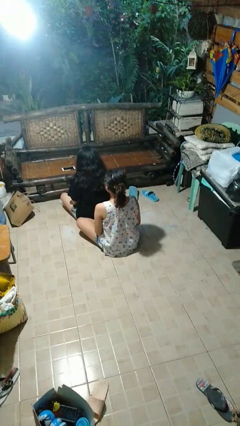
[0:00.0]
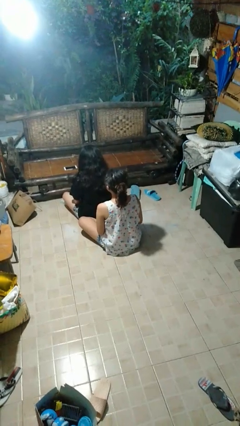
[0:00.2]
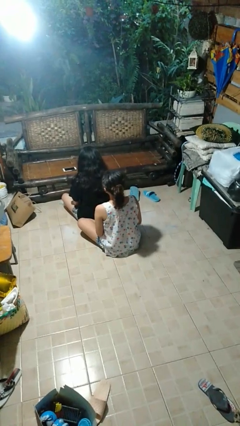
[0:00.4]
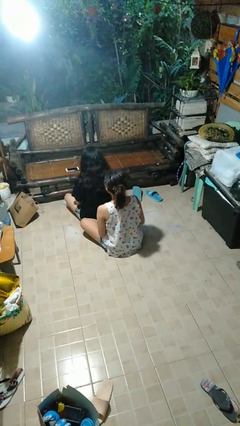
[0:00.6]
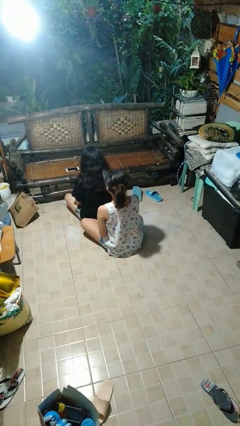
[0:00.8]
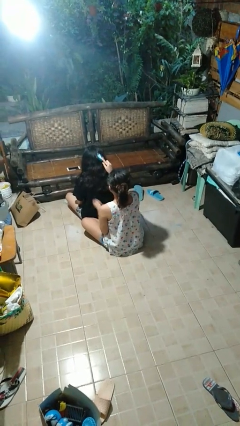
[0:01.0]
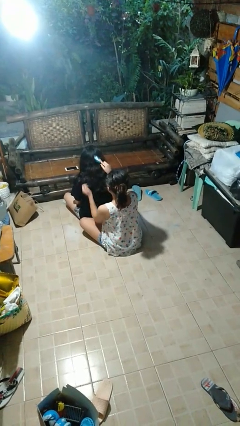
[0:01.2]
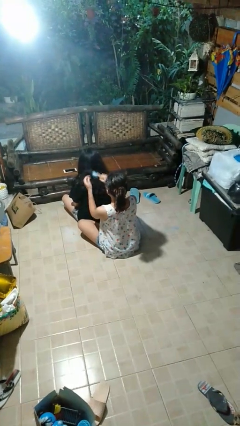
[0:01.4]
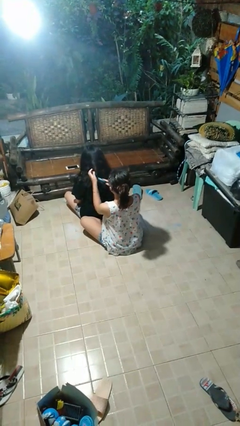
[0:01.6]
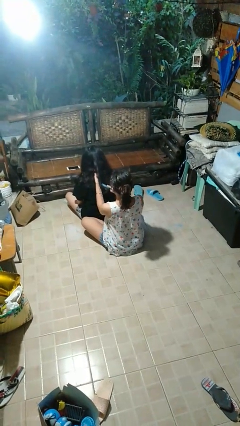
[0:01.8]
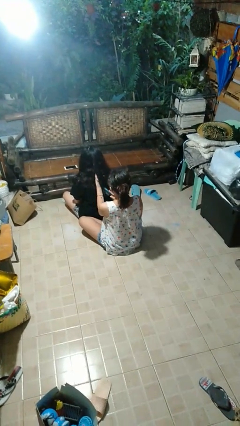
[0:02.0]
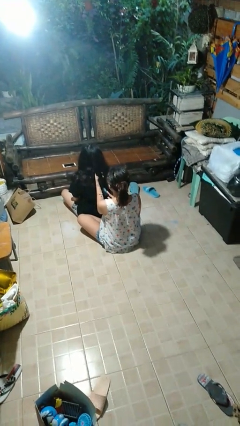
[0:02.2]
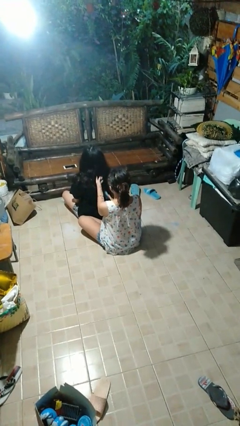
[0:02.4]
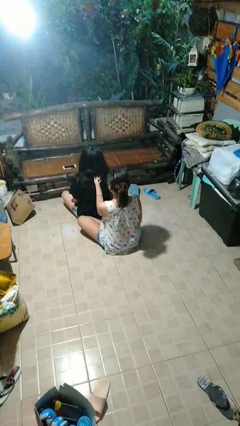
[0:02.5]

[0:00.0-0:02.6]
person brushes hair of person

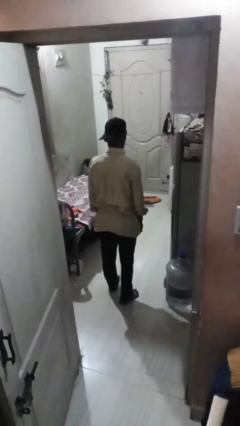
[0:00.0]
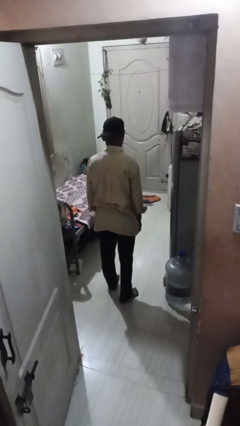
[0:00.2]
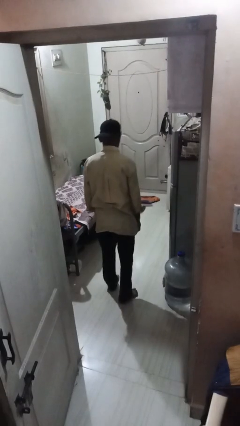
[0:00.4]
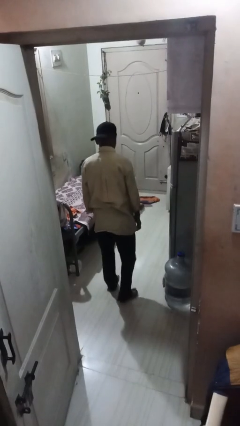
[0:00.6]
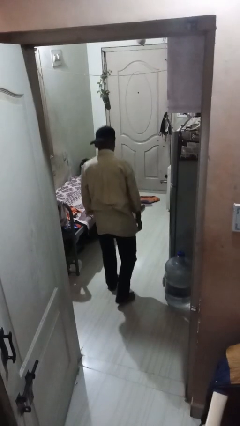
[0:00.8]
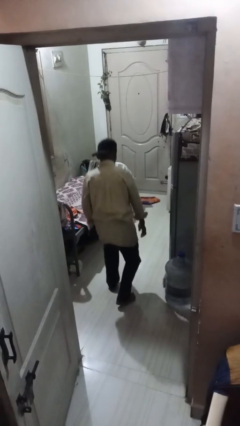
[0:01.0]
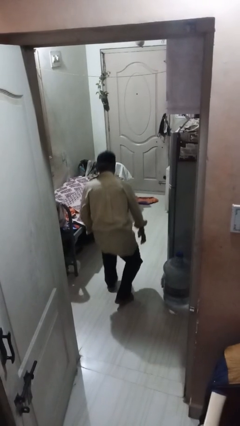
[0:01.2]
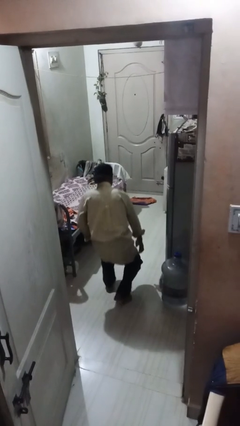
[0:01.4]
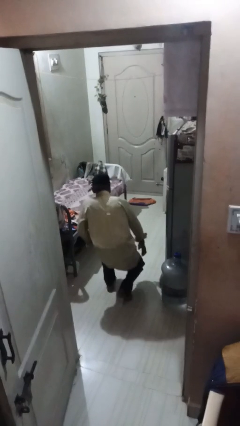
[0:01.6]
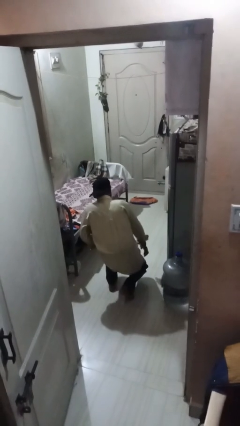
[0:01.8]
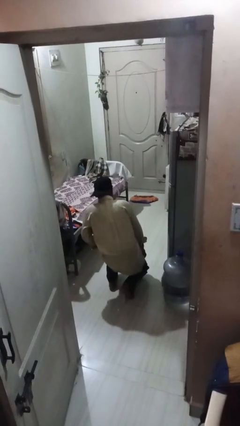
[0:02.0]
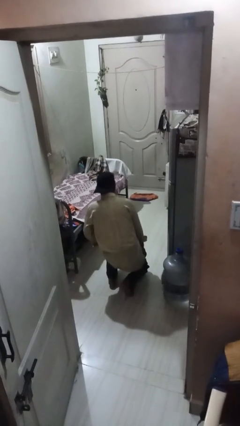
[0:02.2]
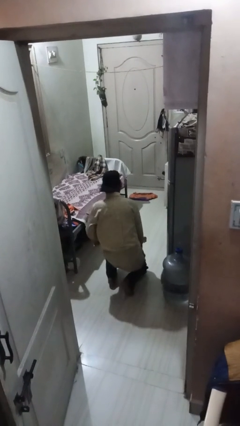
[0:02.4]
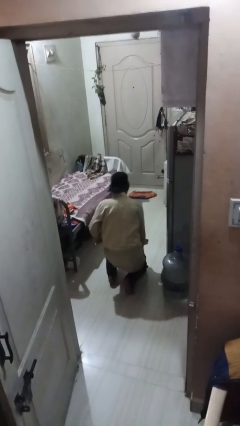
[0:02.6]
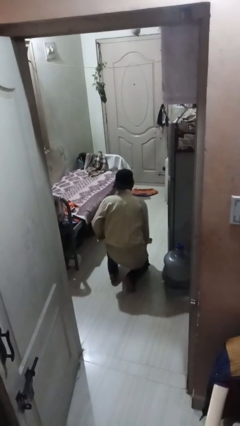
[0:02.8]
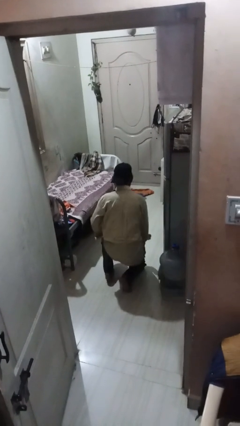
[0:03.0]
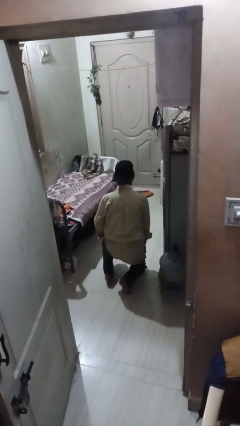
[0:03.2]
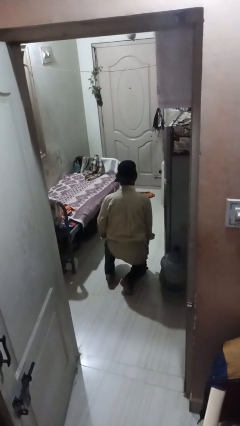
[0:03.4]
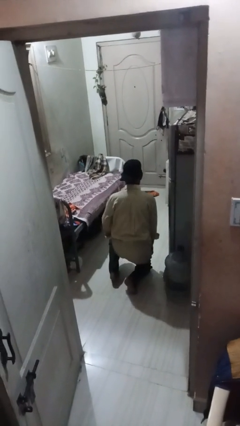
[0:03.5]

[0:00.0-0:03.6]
person kneels

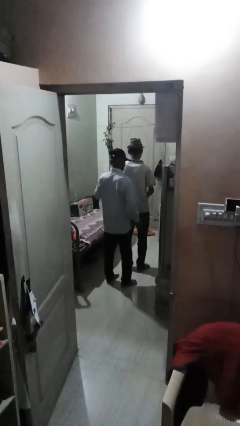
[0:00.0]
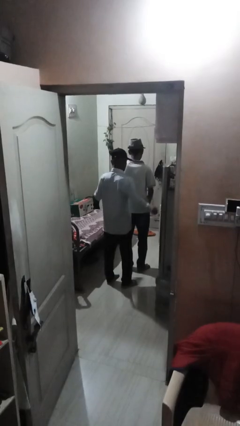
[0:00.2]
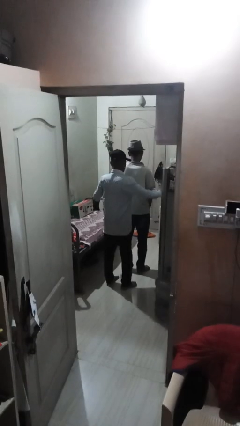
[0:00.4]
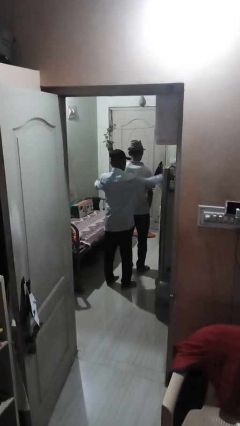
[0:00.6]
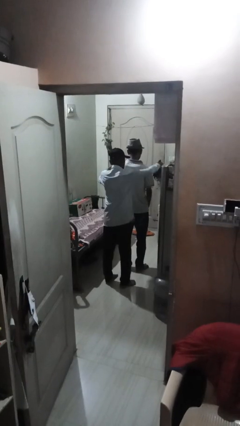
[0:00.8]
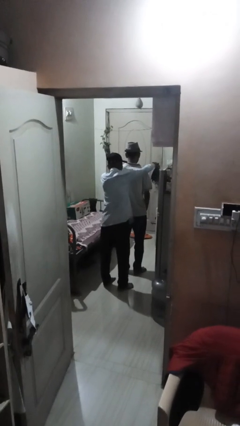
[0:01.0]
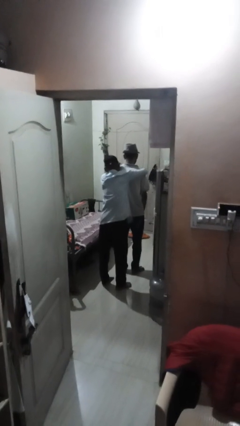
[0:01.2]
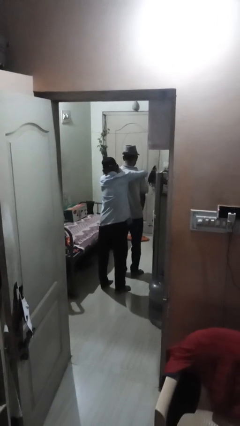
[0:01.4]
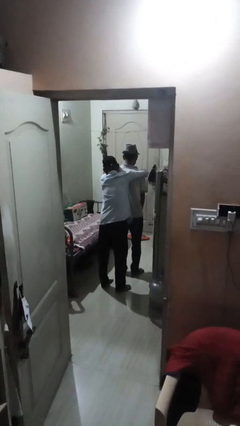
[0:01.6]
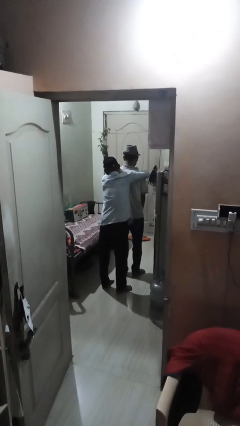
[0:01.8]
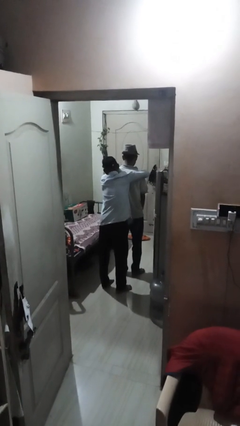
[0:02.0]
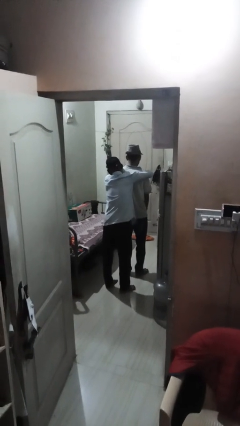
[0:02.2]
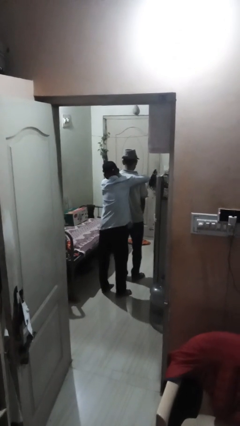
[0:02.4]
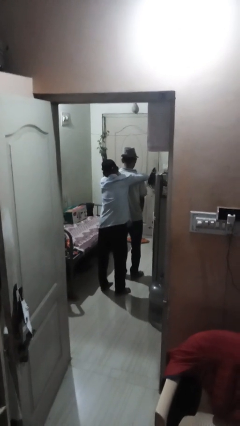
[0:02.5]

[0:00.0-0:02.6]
person hugs person from behind

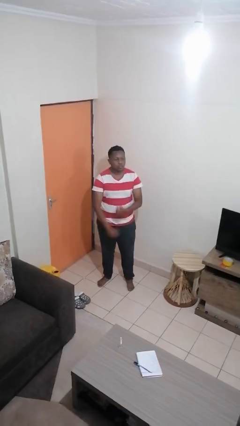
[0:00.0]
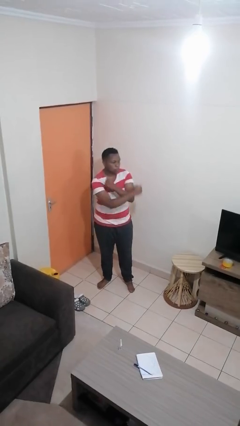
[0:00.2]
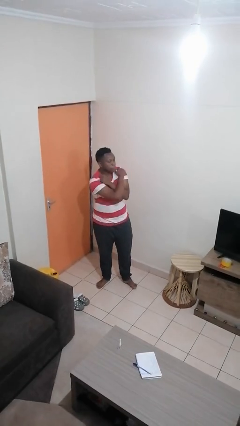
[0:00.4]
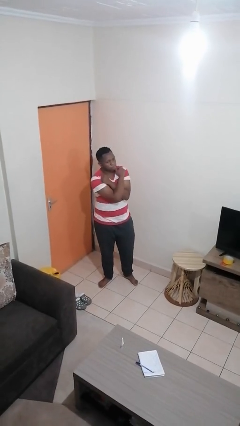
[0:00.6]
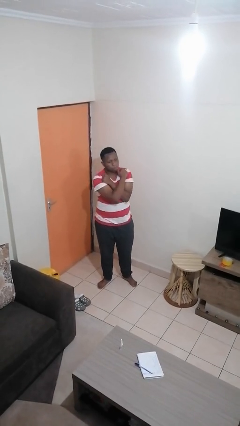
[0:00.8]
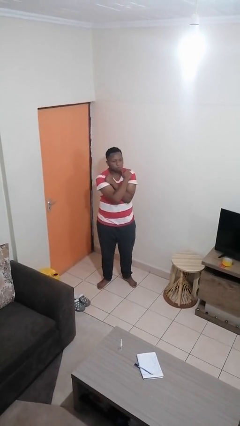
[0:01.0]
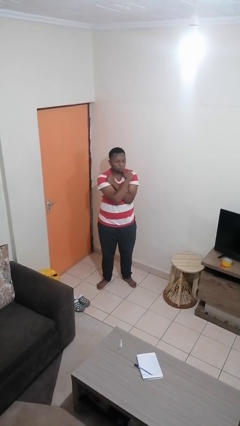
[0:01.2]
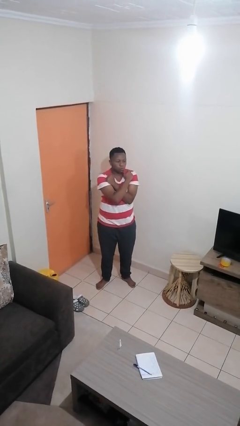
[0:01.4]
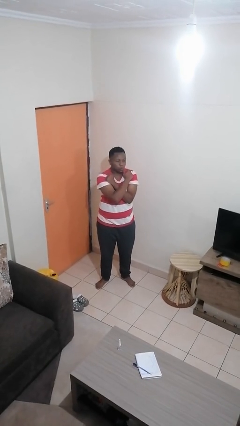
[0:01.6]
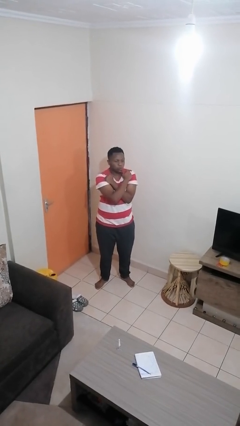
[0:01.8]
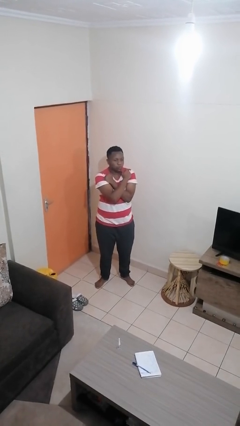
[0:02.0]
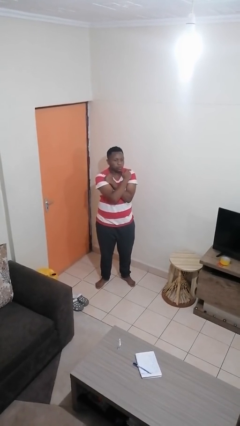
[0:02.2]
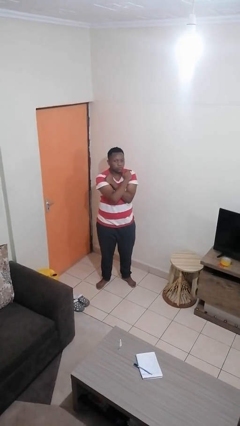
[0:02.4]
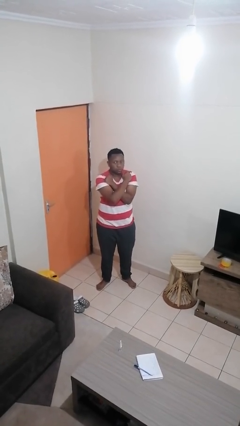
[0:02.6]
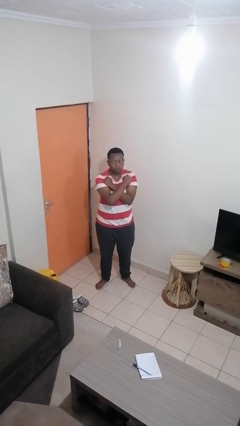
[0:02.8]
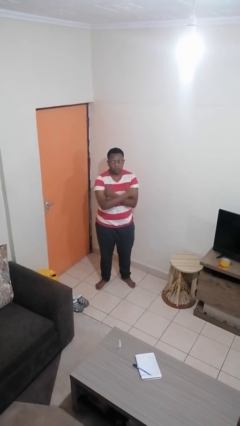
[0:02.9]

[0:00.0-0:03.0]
person gestures arms x

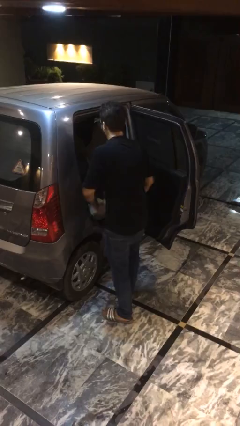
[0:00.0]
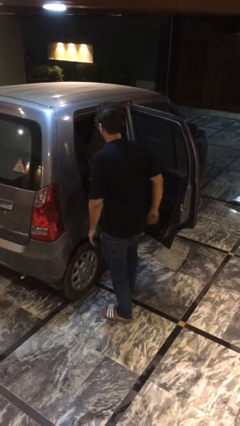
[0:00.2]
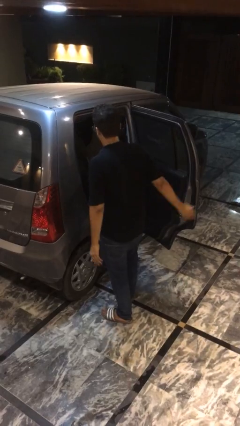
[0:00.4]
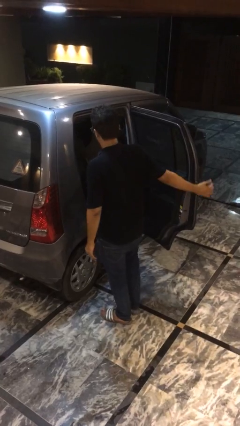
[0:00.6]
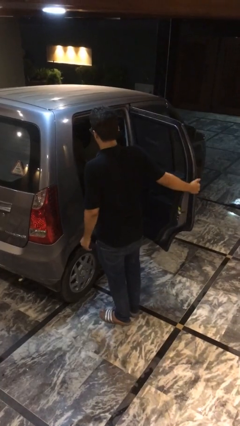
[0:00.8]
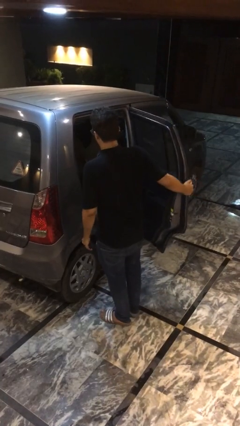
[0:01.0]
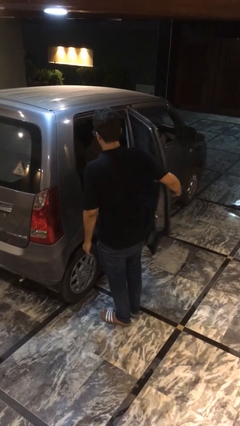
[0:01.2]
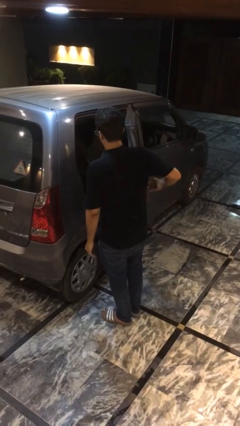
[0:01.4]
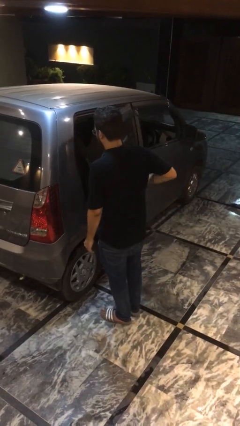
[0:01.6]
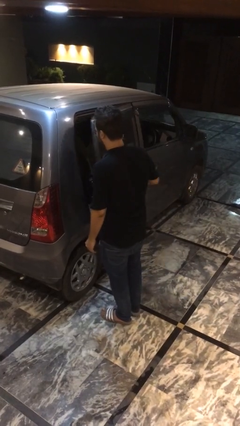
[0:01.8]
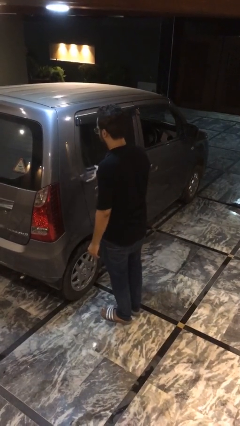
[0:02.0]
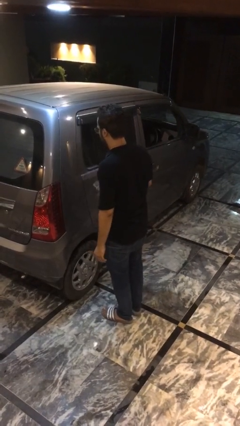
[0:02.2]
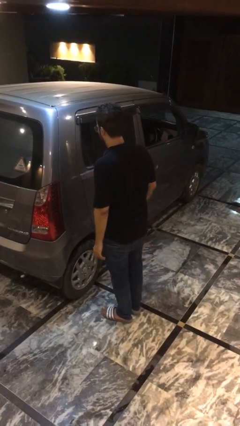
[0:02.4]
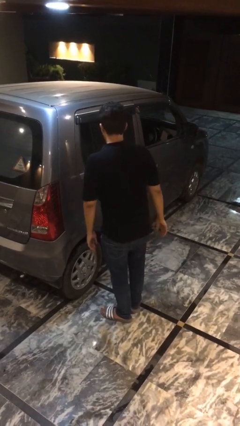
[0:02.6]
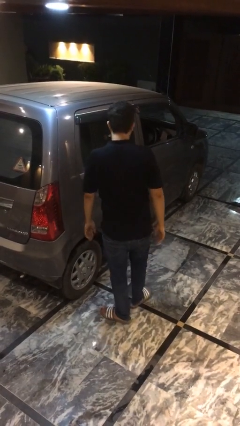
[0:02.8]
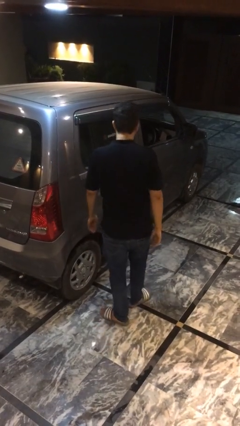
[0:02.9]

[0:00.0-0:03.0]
person closes car door

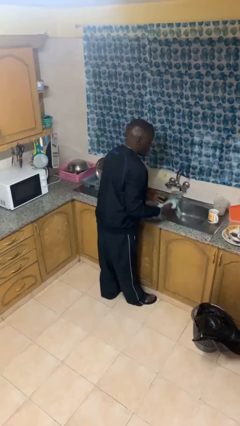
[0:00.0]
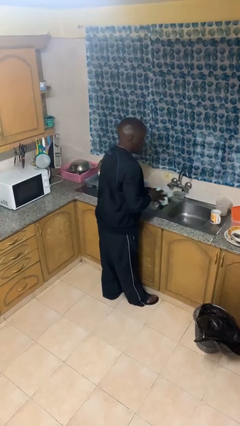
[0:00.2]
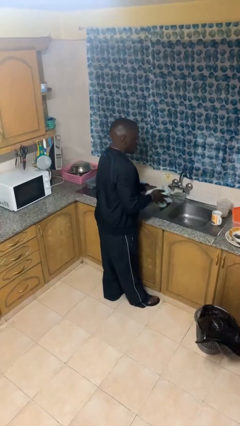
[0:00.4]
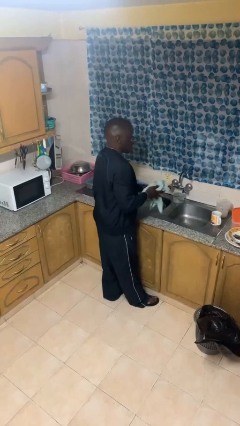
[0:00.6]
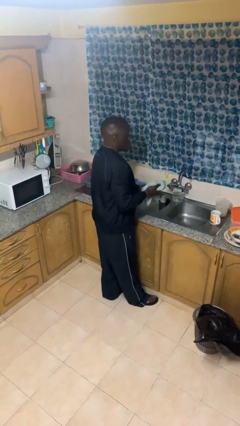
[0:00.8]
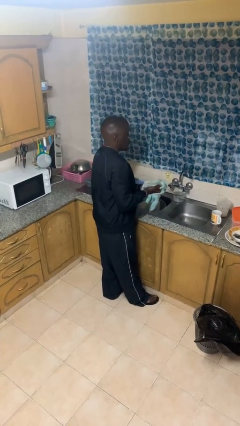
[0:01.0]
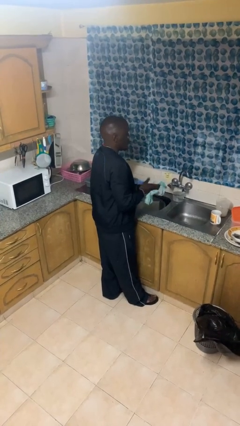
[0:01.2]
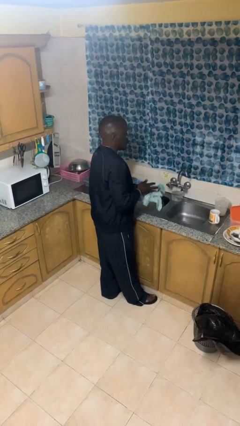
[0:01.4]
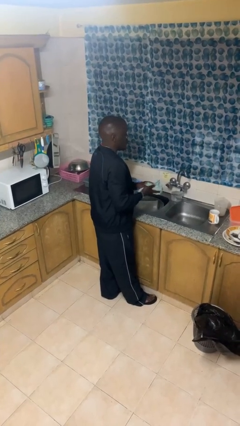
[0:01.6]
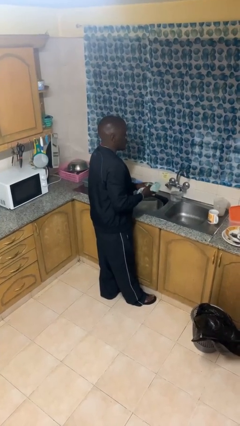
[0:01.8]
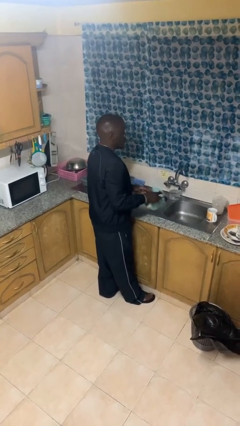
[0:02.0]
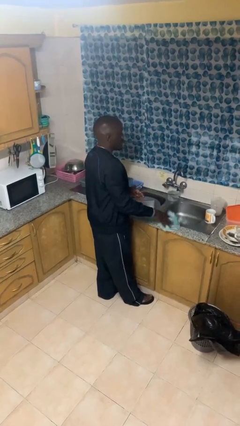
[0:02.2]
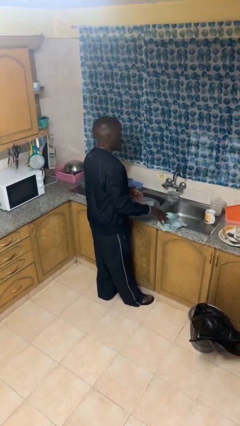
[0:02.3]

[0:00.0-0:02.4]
person dries hands with towel
